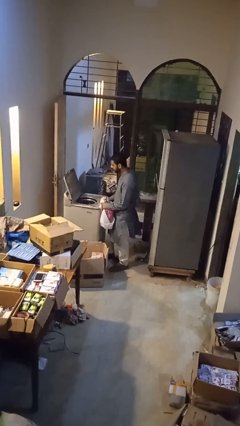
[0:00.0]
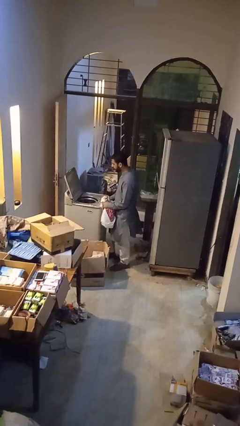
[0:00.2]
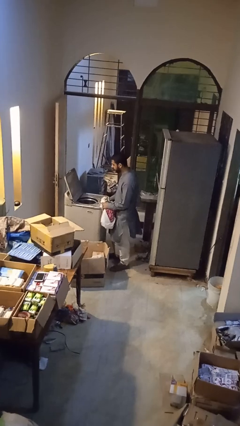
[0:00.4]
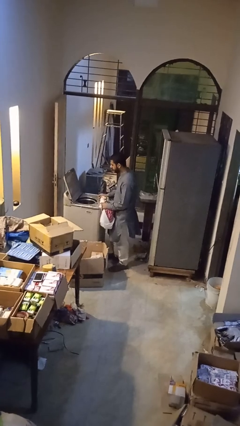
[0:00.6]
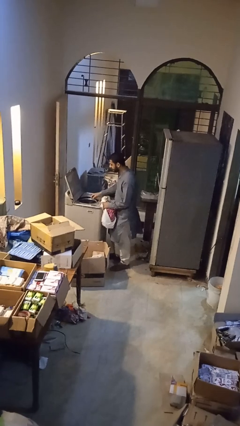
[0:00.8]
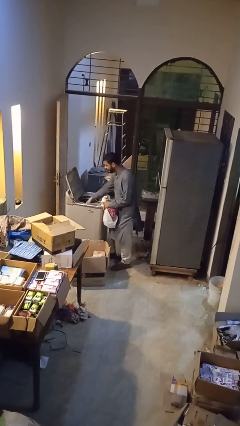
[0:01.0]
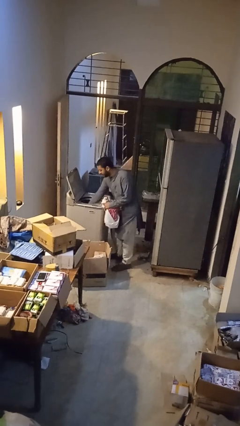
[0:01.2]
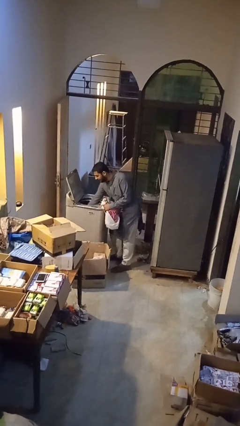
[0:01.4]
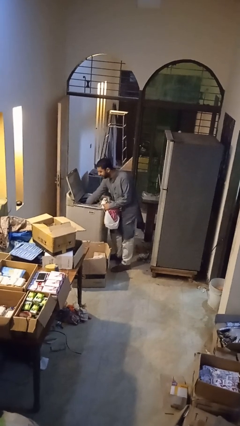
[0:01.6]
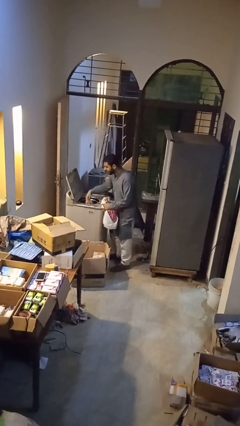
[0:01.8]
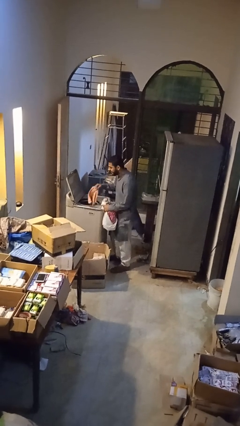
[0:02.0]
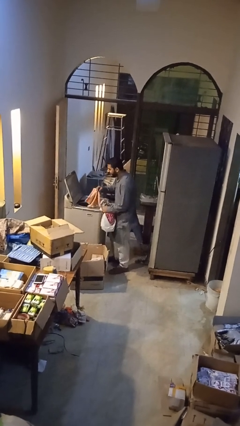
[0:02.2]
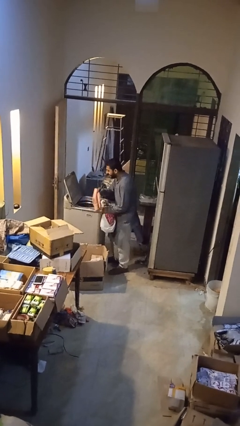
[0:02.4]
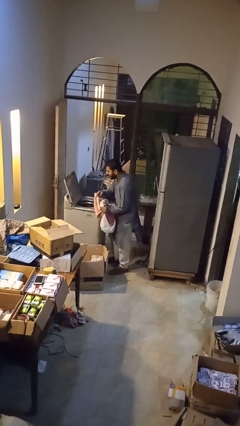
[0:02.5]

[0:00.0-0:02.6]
person unloads dryer

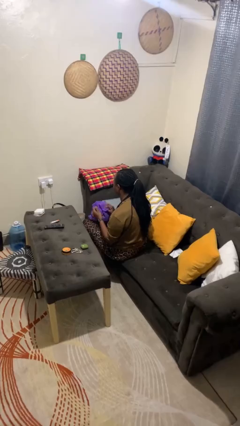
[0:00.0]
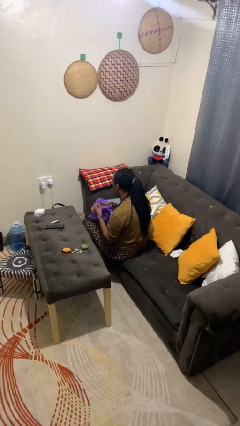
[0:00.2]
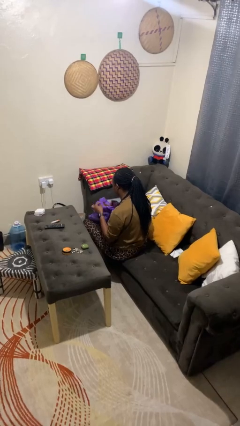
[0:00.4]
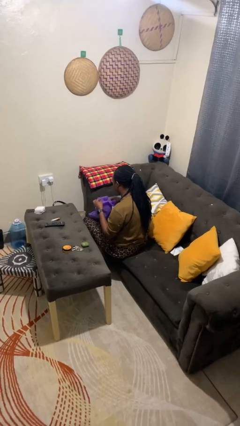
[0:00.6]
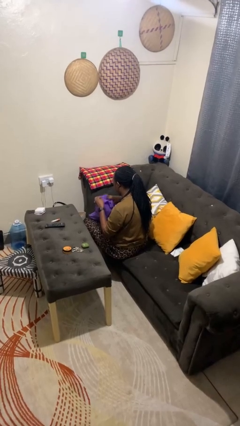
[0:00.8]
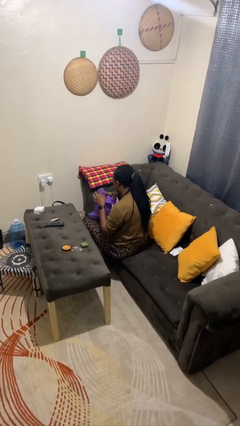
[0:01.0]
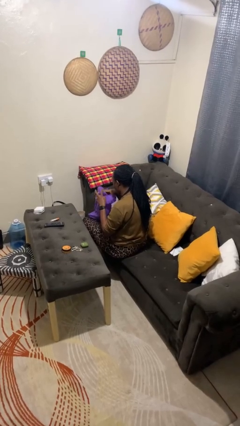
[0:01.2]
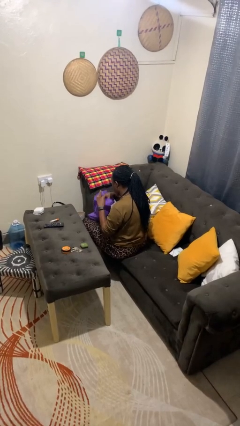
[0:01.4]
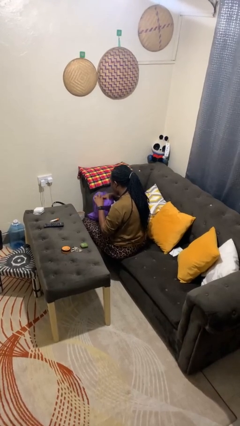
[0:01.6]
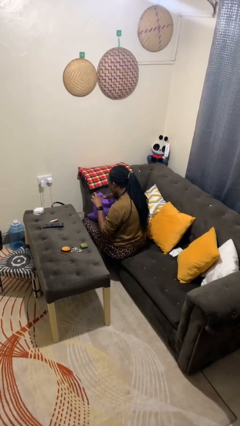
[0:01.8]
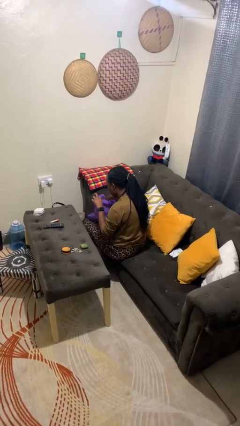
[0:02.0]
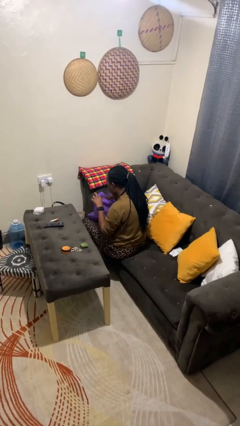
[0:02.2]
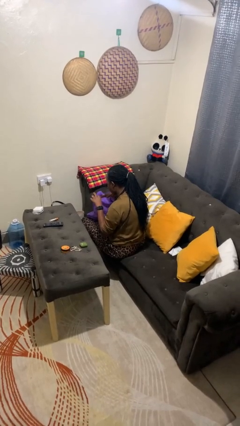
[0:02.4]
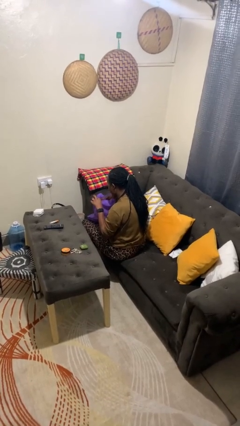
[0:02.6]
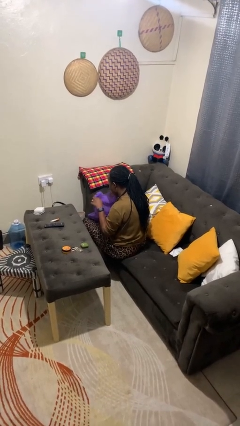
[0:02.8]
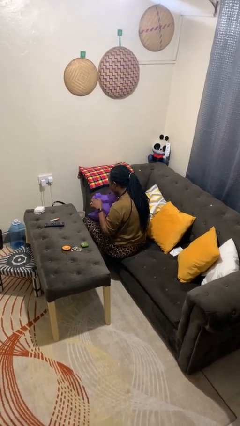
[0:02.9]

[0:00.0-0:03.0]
person searches in bag

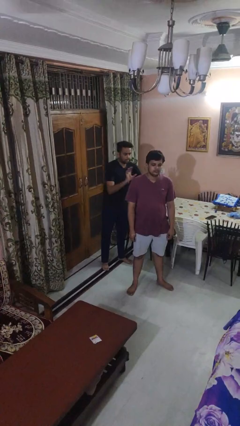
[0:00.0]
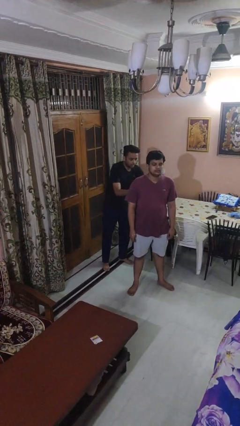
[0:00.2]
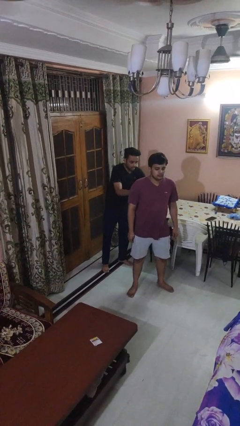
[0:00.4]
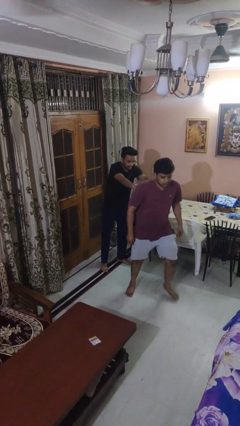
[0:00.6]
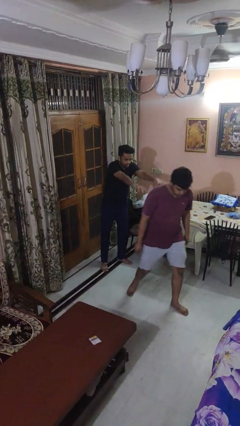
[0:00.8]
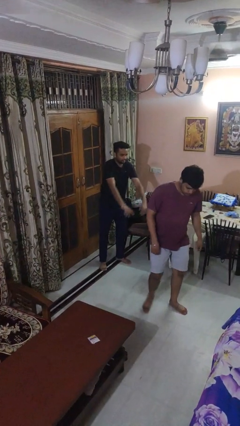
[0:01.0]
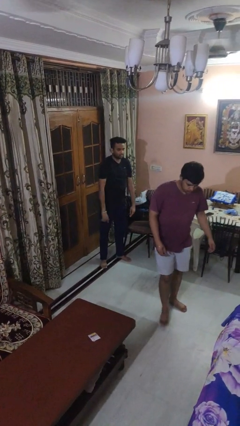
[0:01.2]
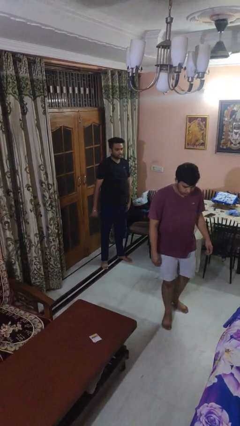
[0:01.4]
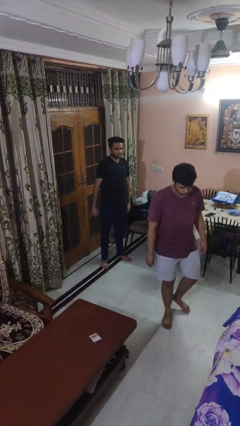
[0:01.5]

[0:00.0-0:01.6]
person shoves person

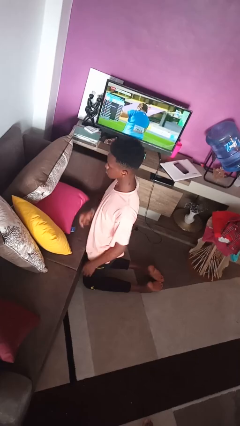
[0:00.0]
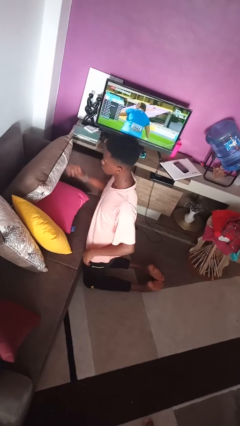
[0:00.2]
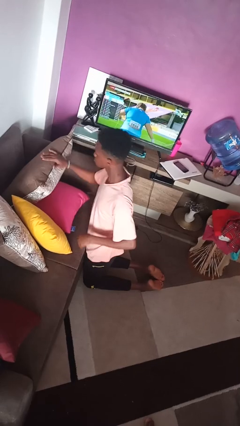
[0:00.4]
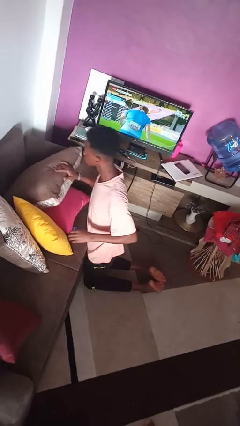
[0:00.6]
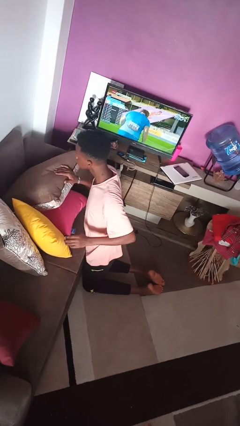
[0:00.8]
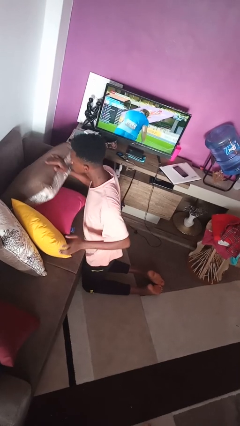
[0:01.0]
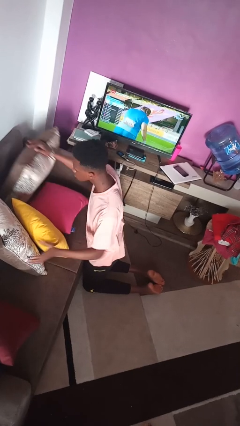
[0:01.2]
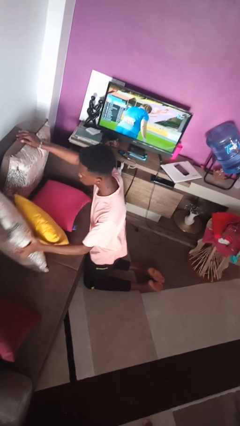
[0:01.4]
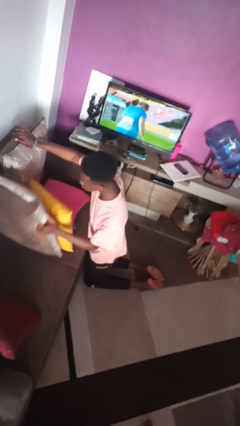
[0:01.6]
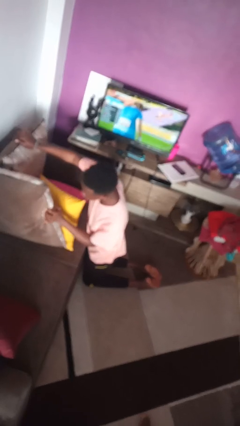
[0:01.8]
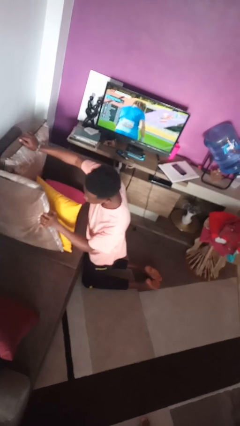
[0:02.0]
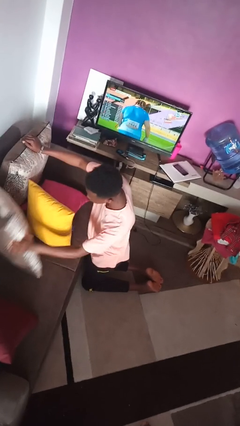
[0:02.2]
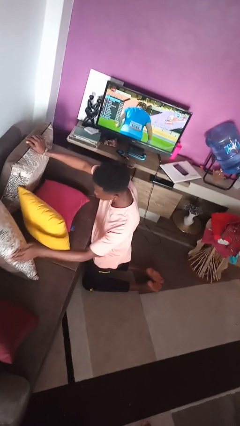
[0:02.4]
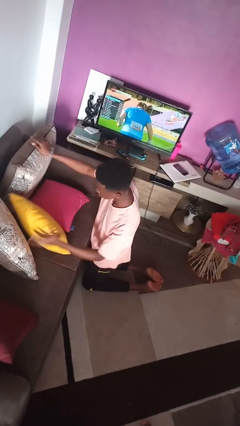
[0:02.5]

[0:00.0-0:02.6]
person searches in couch

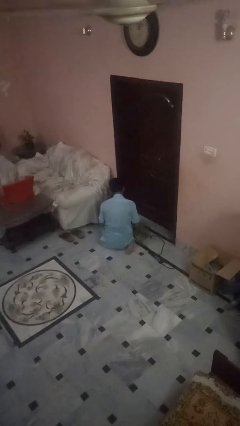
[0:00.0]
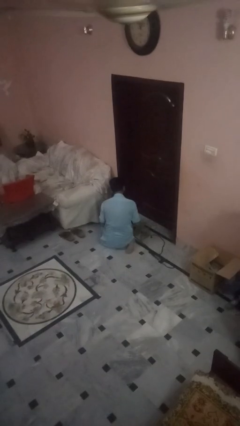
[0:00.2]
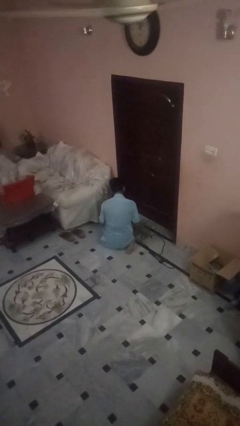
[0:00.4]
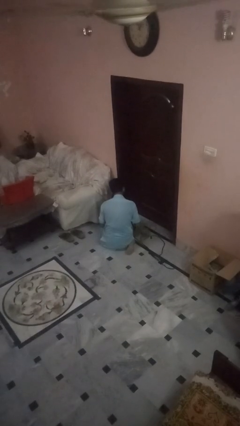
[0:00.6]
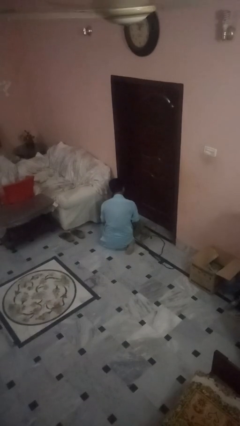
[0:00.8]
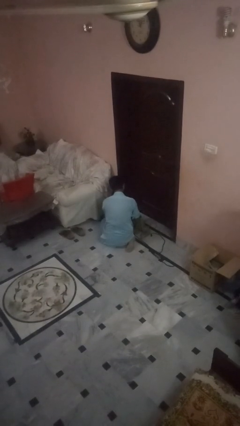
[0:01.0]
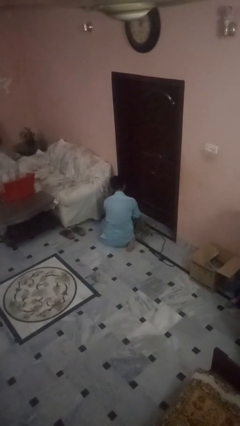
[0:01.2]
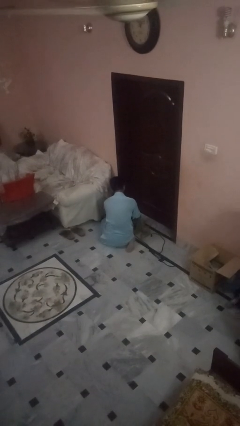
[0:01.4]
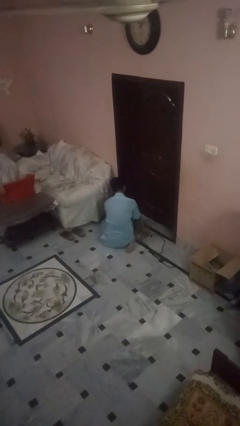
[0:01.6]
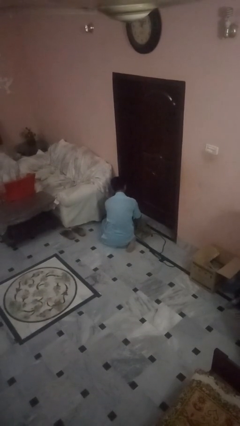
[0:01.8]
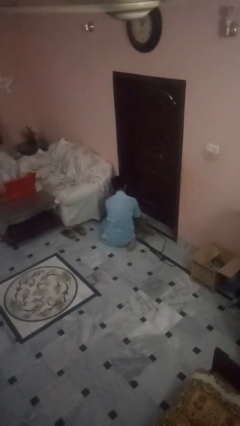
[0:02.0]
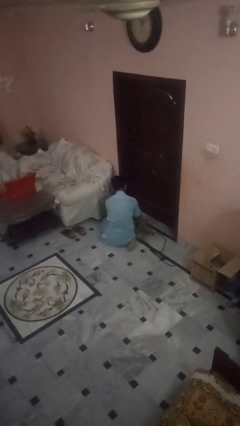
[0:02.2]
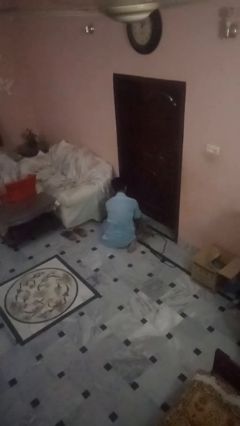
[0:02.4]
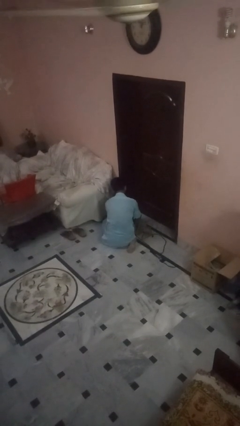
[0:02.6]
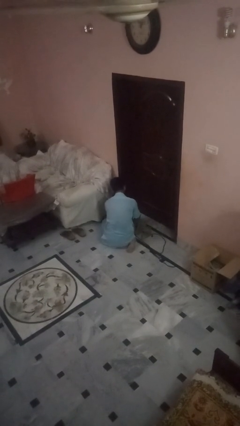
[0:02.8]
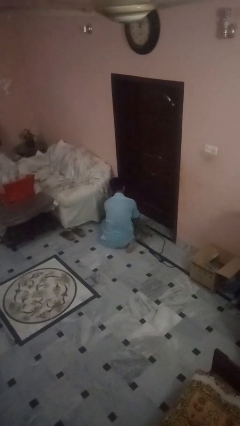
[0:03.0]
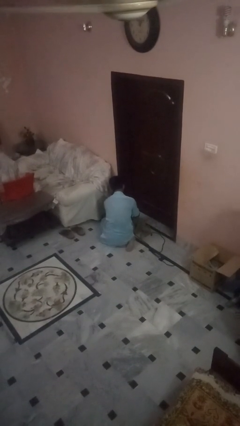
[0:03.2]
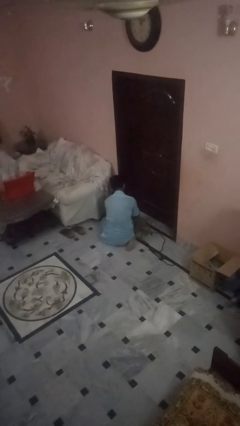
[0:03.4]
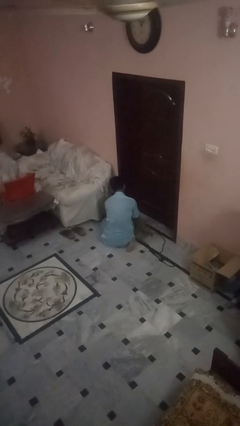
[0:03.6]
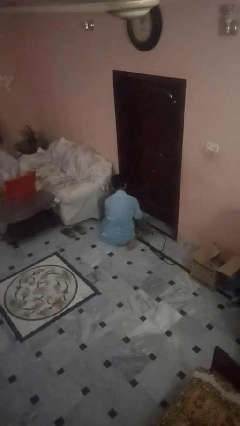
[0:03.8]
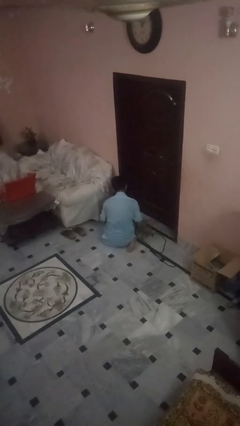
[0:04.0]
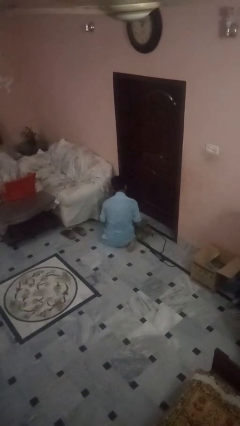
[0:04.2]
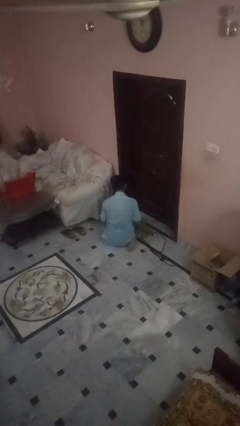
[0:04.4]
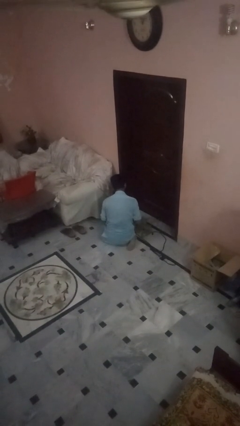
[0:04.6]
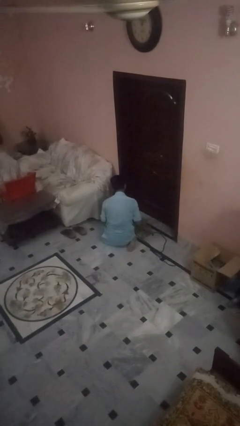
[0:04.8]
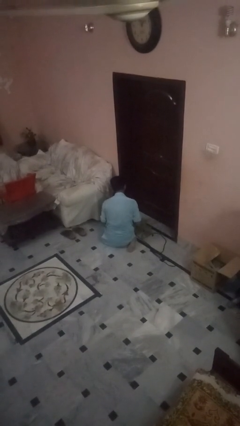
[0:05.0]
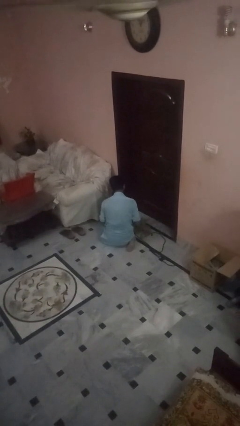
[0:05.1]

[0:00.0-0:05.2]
person unattaches leash from dog

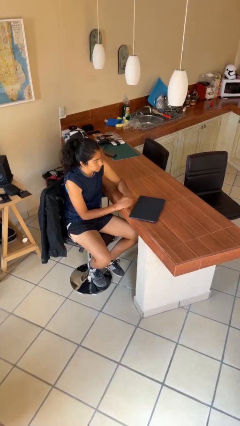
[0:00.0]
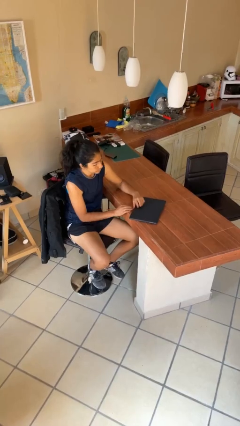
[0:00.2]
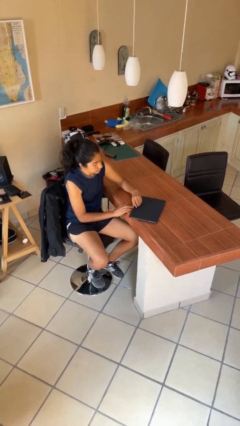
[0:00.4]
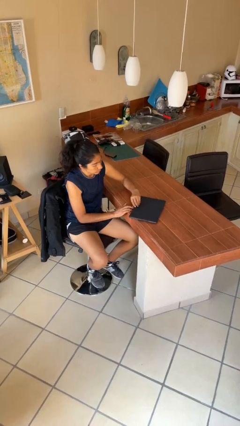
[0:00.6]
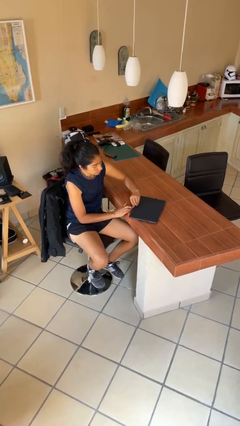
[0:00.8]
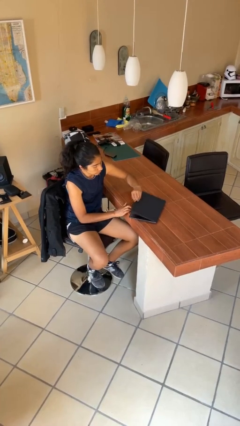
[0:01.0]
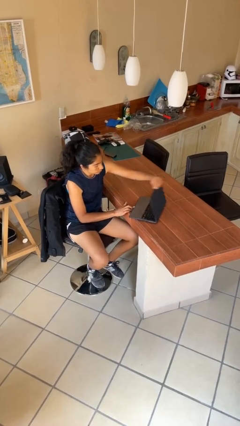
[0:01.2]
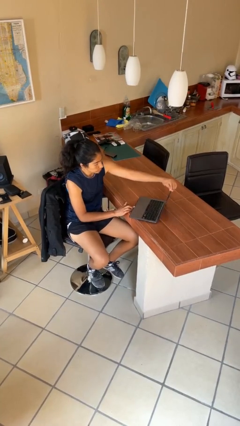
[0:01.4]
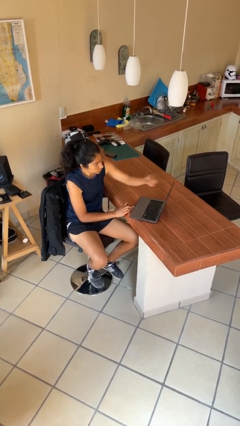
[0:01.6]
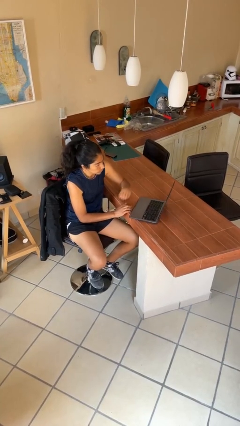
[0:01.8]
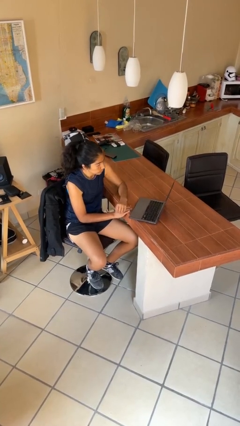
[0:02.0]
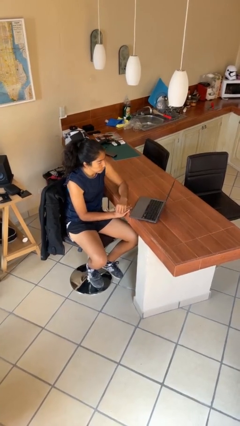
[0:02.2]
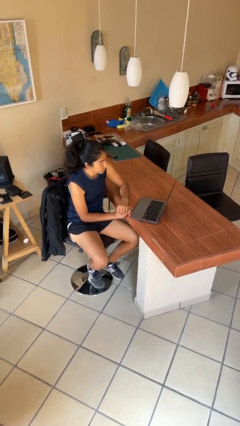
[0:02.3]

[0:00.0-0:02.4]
person opens laptop
